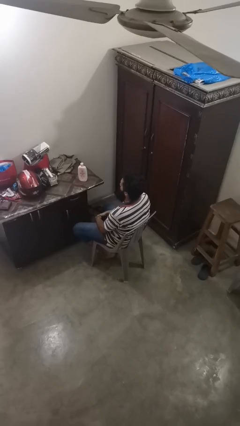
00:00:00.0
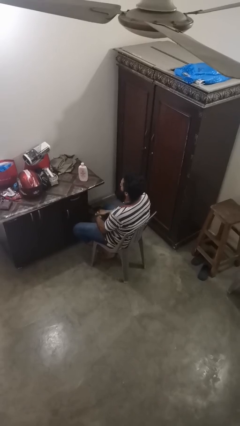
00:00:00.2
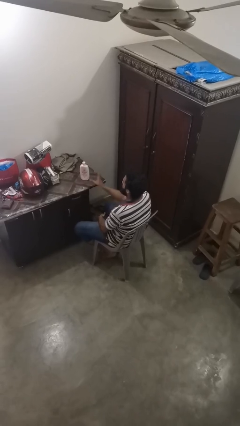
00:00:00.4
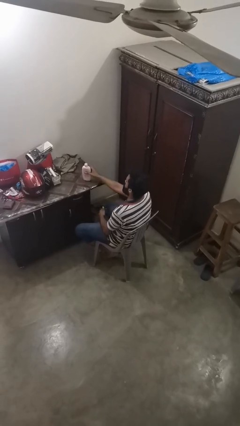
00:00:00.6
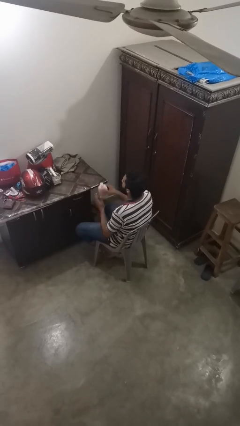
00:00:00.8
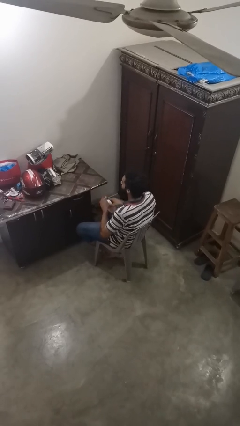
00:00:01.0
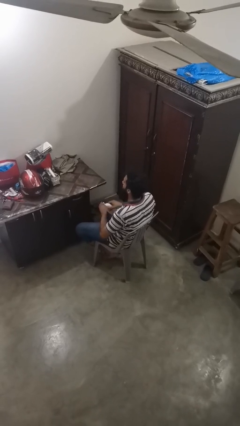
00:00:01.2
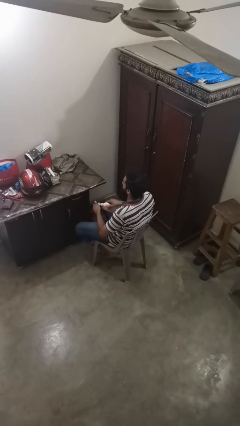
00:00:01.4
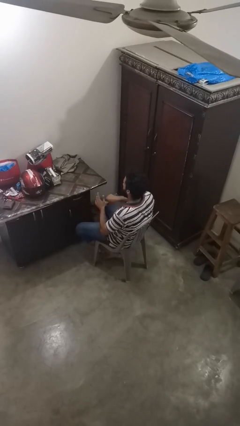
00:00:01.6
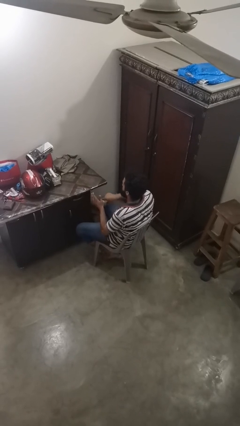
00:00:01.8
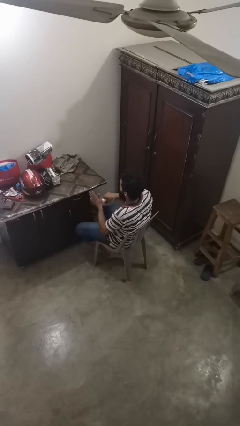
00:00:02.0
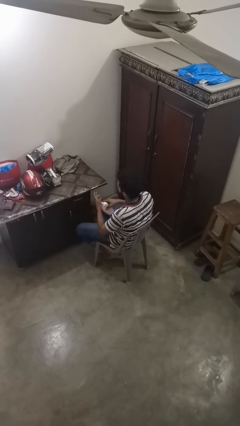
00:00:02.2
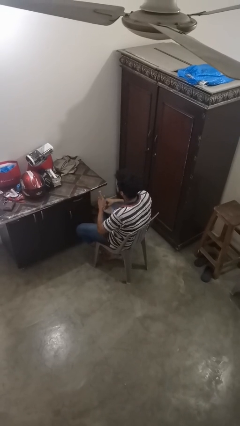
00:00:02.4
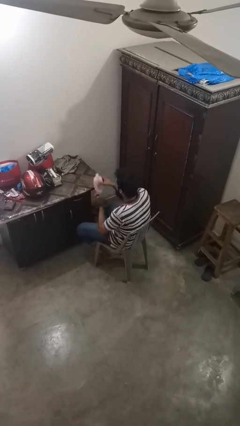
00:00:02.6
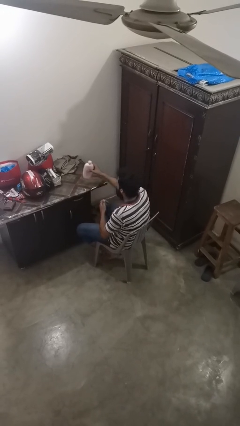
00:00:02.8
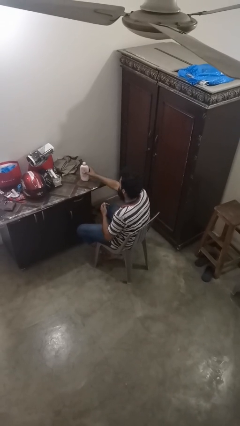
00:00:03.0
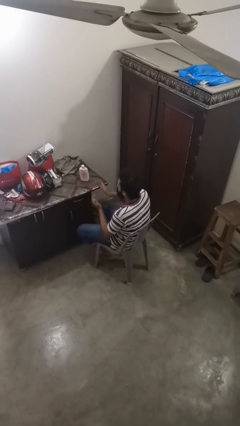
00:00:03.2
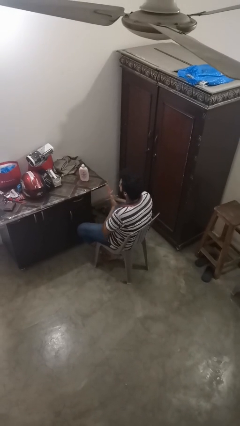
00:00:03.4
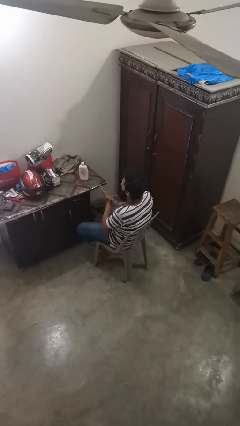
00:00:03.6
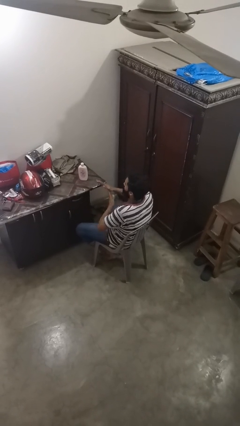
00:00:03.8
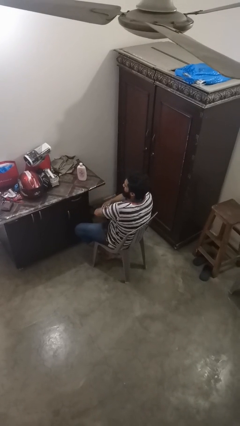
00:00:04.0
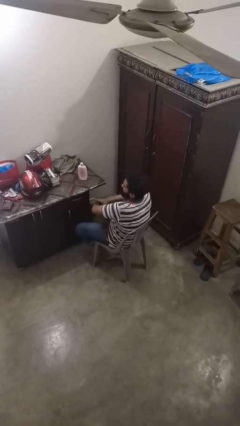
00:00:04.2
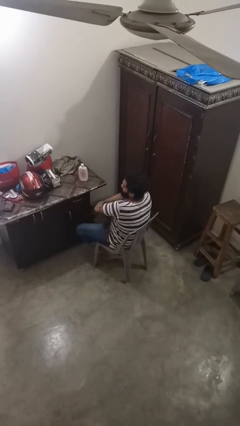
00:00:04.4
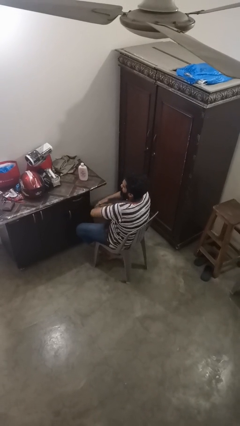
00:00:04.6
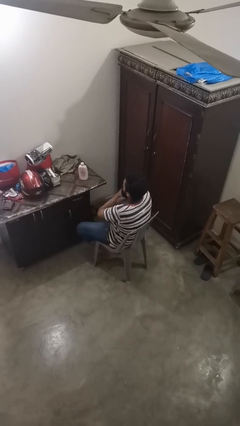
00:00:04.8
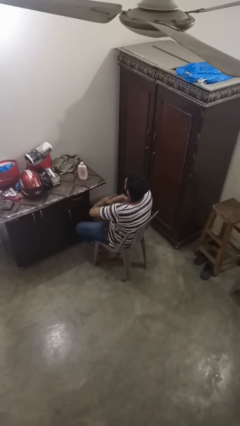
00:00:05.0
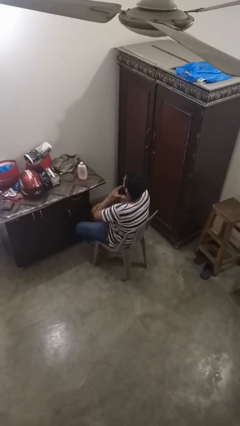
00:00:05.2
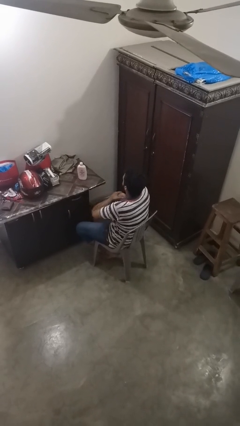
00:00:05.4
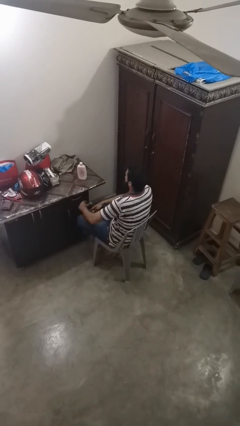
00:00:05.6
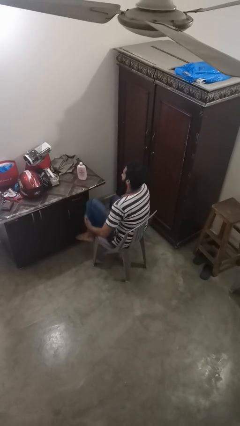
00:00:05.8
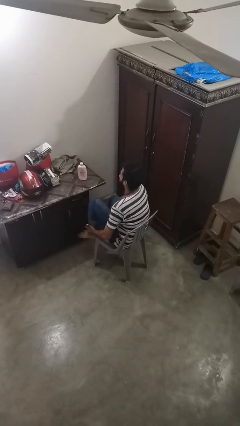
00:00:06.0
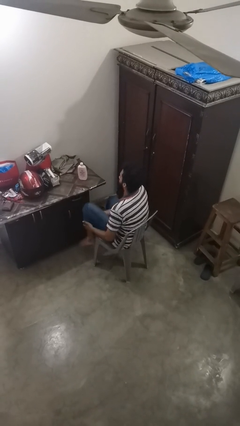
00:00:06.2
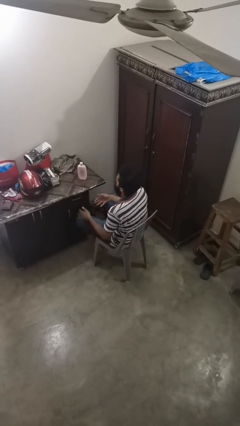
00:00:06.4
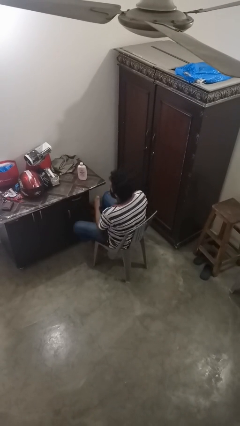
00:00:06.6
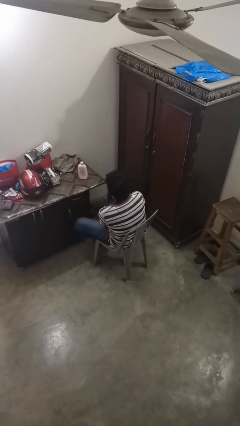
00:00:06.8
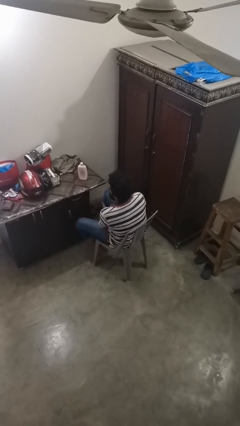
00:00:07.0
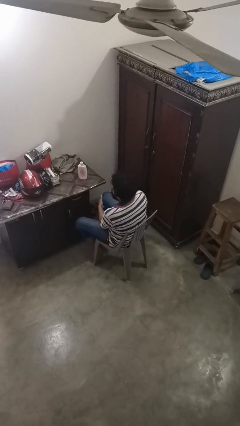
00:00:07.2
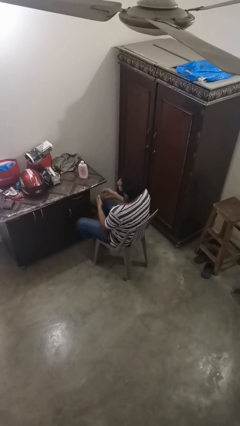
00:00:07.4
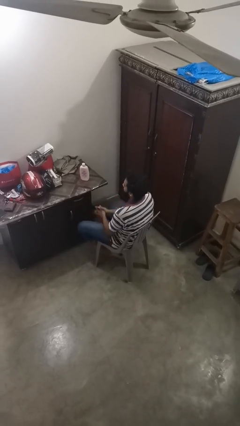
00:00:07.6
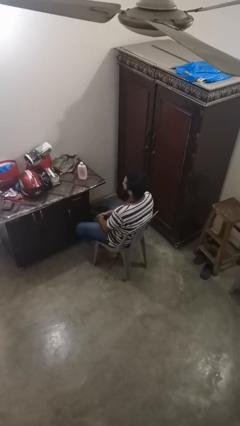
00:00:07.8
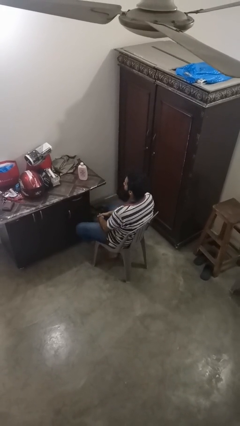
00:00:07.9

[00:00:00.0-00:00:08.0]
person applies sunscreen

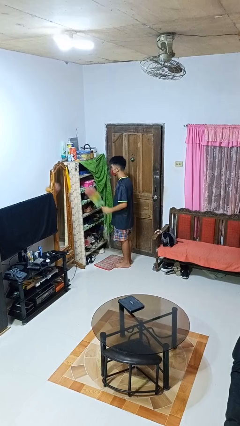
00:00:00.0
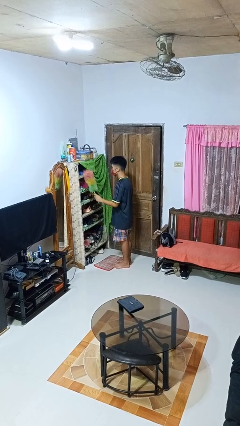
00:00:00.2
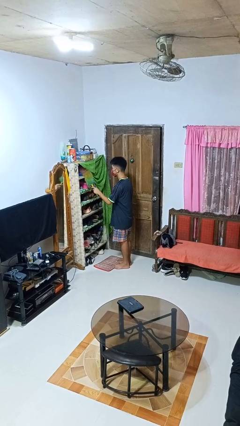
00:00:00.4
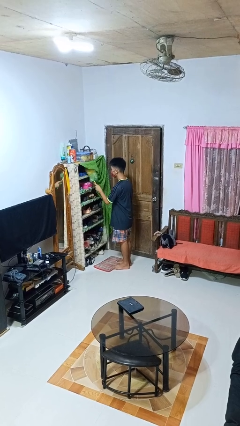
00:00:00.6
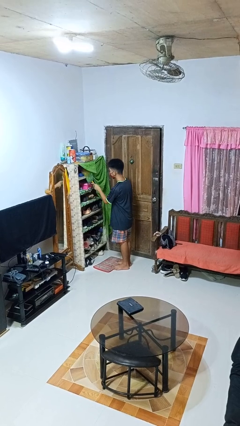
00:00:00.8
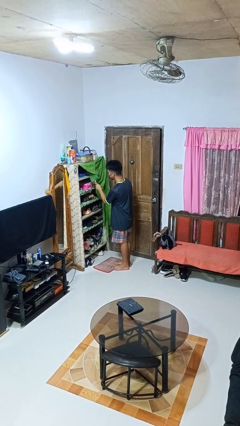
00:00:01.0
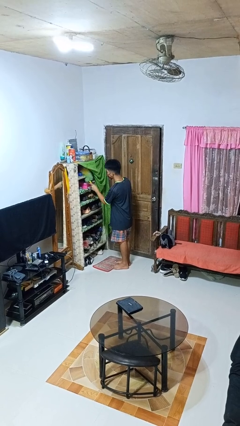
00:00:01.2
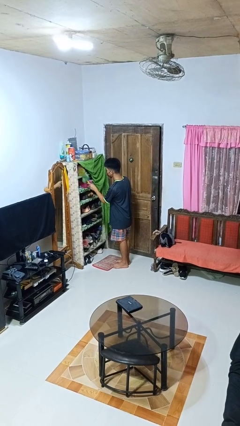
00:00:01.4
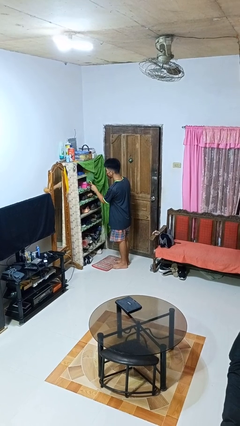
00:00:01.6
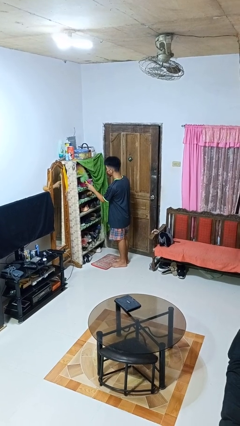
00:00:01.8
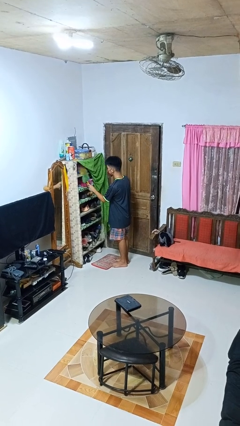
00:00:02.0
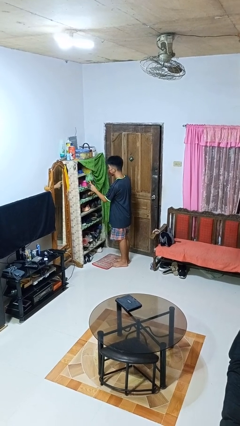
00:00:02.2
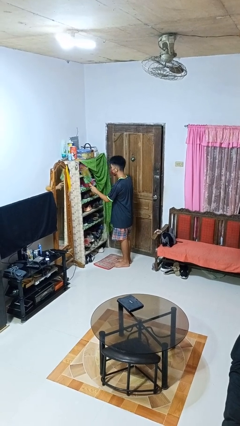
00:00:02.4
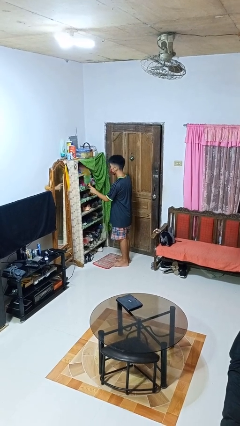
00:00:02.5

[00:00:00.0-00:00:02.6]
person dusts furniture

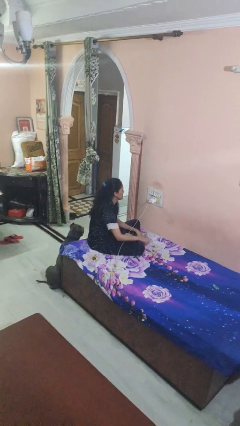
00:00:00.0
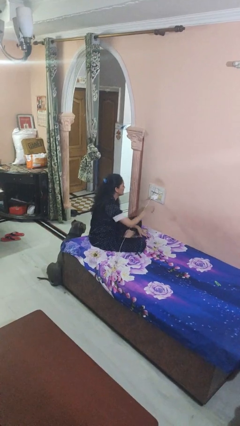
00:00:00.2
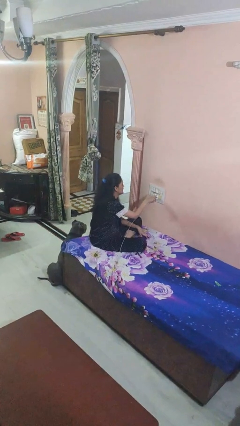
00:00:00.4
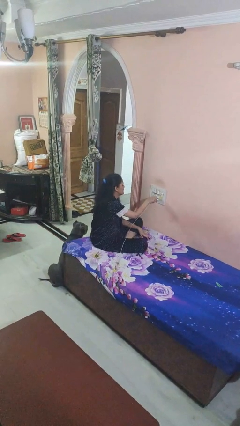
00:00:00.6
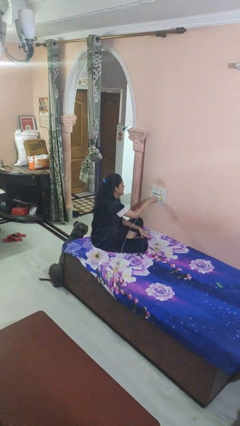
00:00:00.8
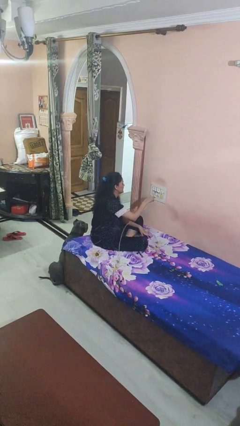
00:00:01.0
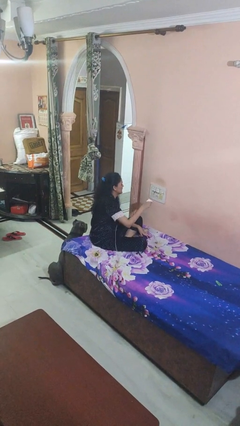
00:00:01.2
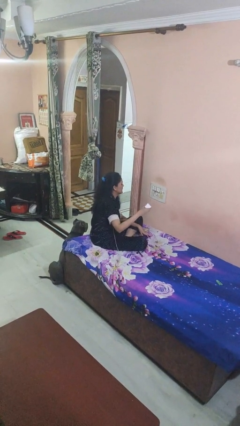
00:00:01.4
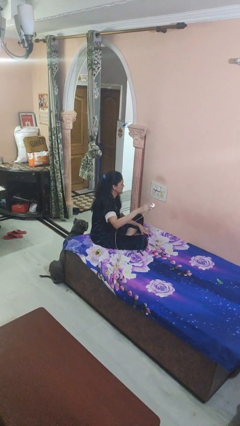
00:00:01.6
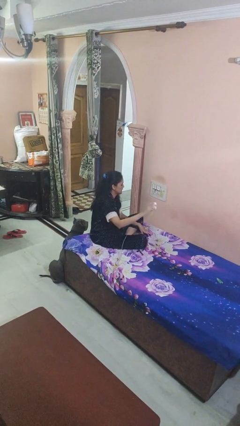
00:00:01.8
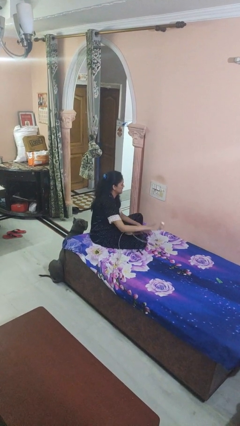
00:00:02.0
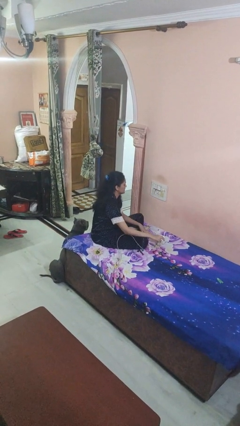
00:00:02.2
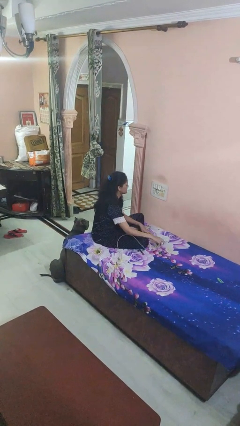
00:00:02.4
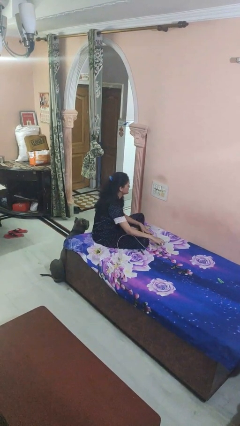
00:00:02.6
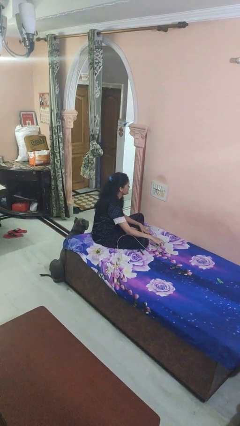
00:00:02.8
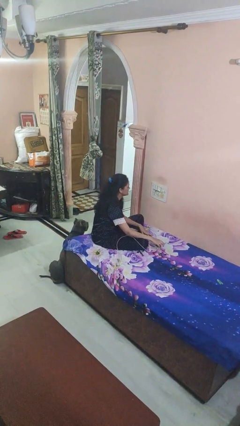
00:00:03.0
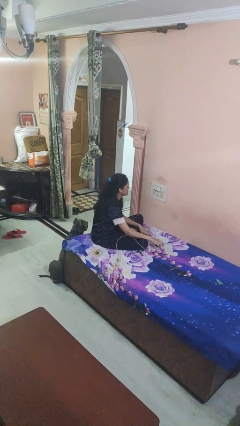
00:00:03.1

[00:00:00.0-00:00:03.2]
person unplugs from electrical socket

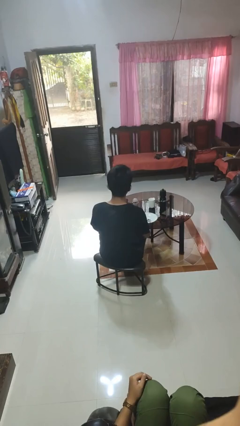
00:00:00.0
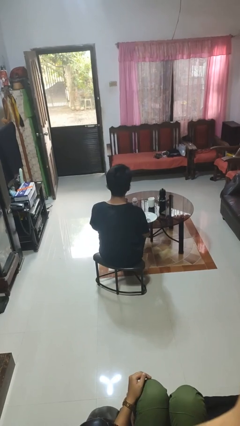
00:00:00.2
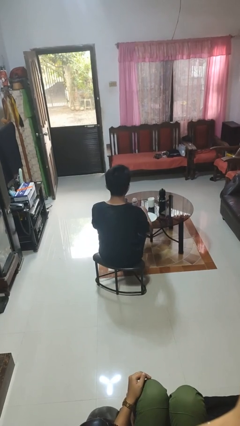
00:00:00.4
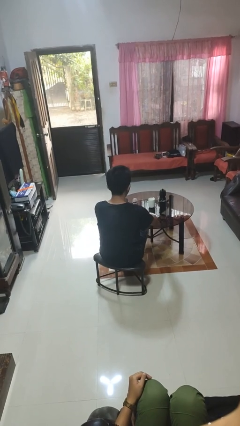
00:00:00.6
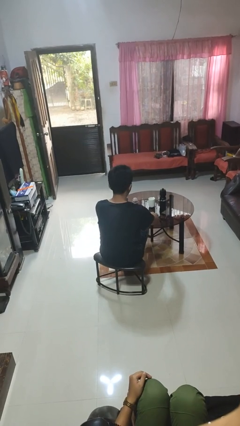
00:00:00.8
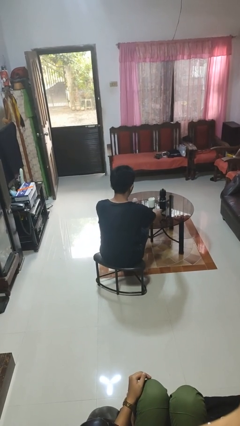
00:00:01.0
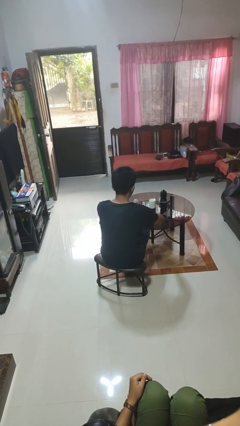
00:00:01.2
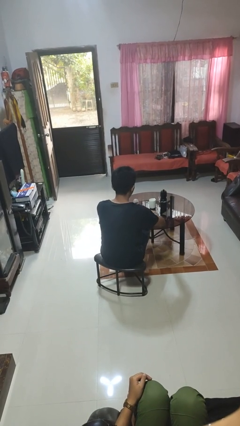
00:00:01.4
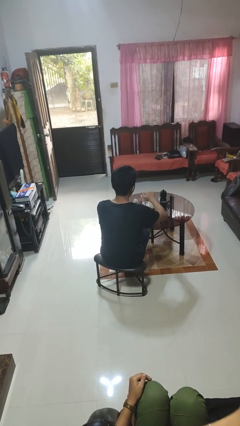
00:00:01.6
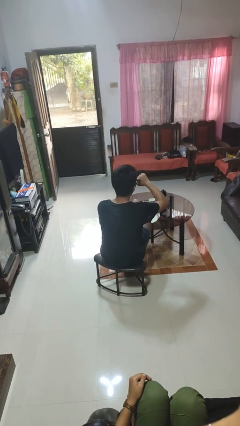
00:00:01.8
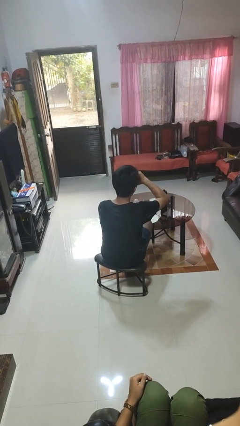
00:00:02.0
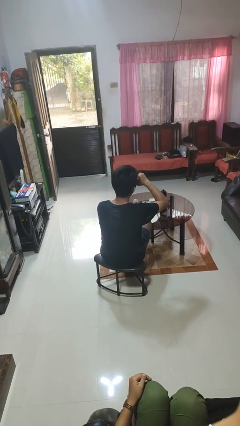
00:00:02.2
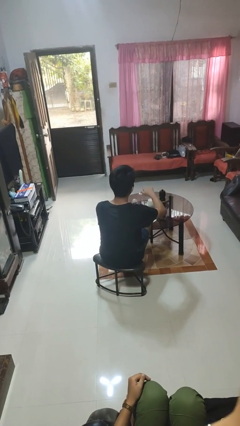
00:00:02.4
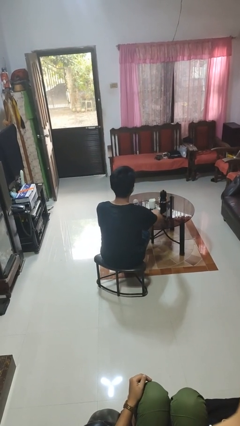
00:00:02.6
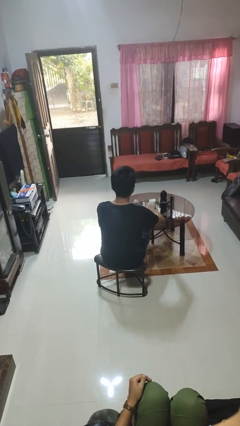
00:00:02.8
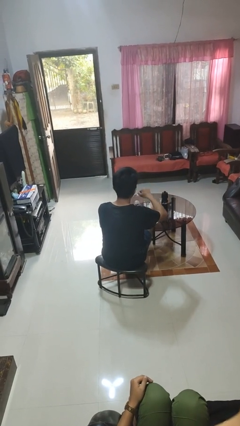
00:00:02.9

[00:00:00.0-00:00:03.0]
person eats with utensil

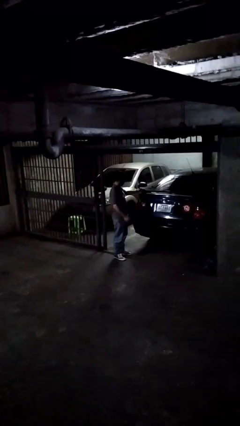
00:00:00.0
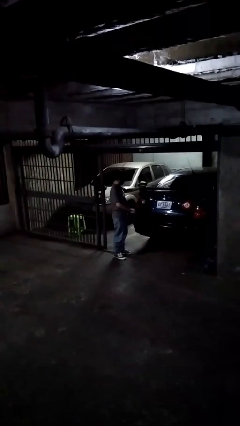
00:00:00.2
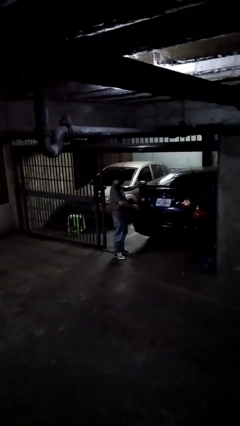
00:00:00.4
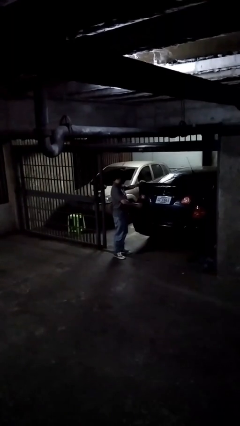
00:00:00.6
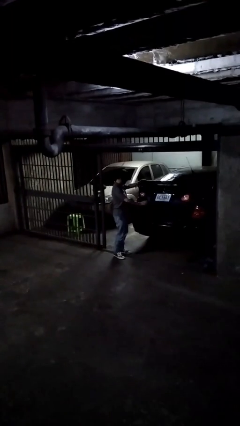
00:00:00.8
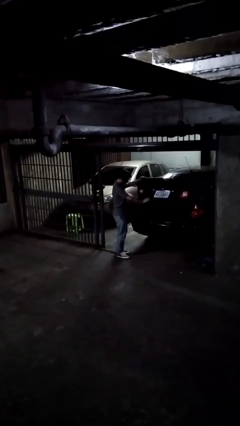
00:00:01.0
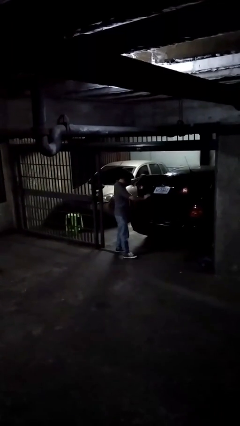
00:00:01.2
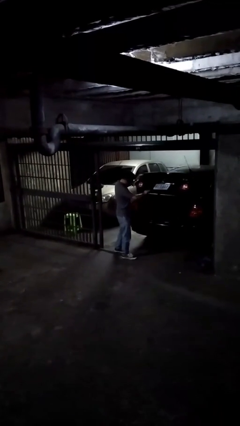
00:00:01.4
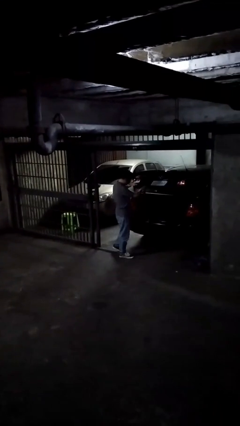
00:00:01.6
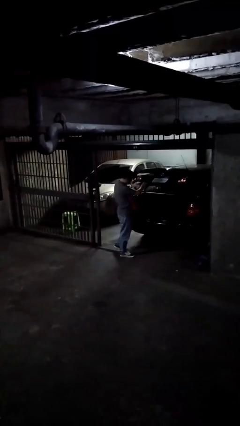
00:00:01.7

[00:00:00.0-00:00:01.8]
person opens car trunk
